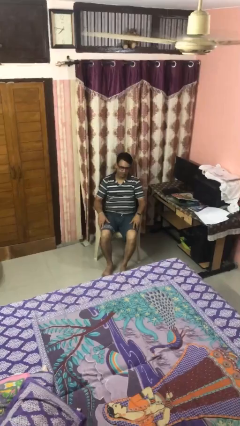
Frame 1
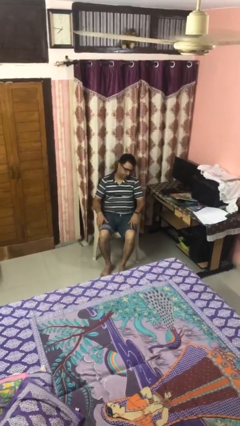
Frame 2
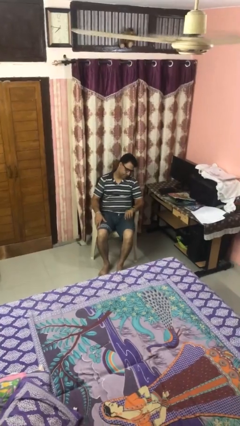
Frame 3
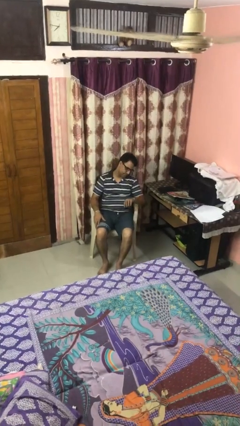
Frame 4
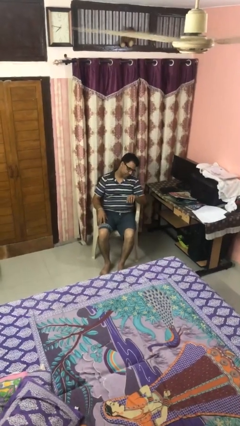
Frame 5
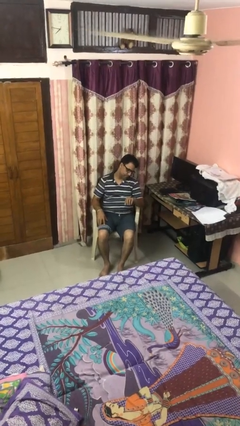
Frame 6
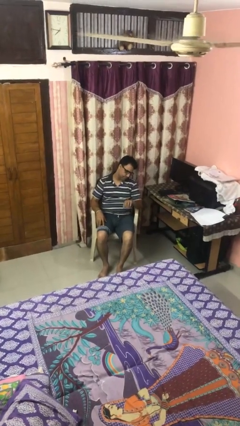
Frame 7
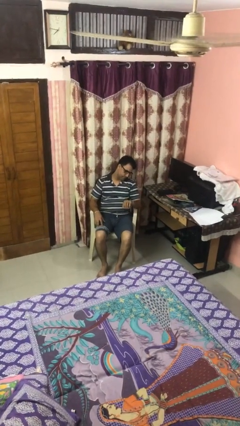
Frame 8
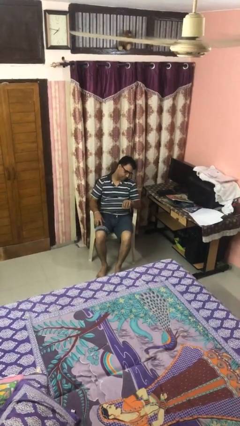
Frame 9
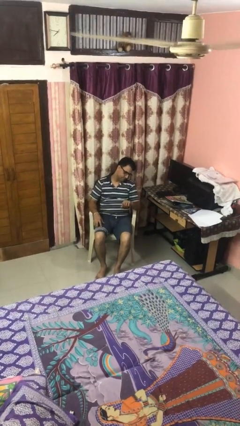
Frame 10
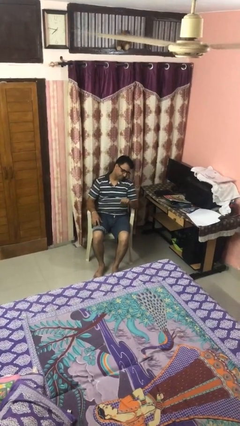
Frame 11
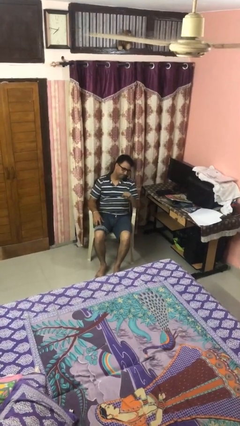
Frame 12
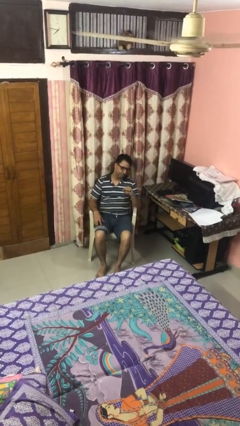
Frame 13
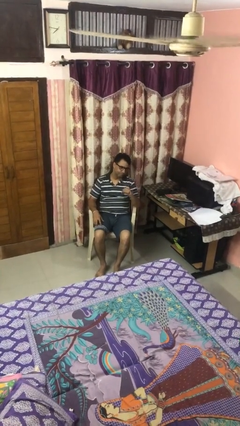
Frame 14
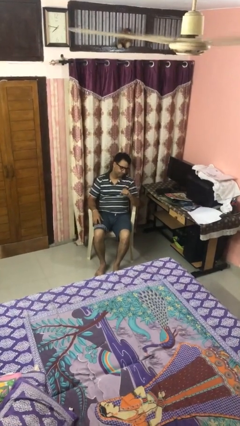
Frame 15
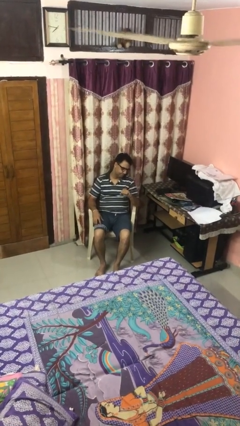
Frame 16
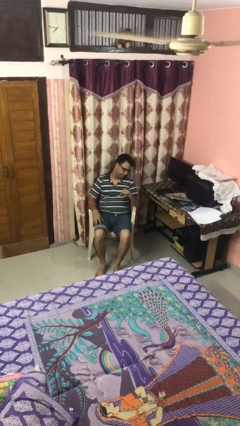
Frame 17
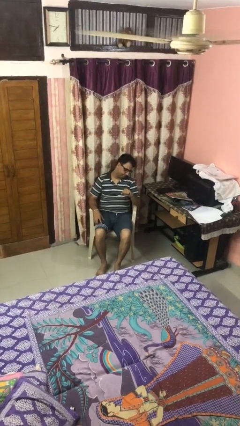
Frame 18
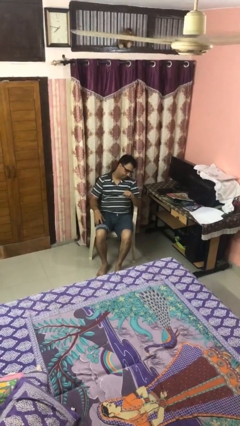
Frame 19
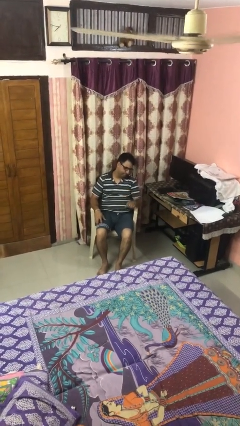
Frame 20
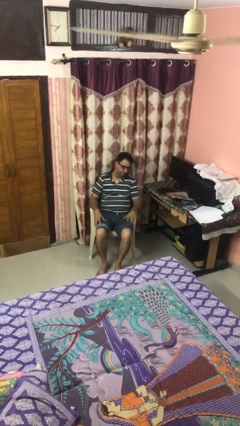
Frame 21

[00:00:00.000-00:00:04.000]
person looks at wristwatch

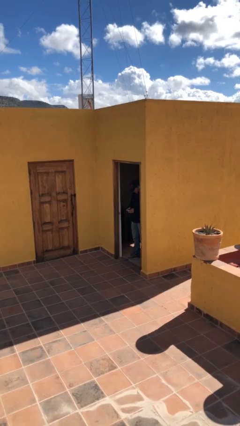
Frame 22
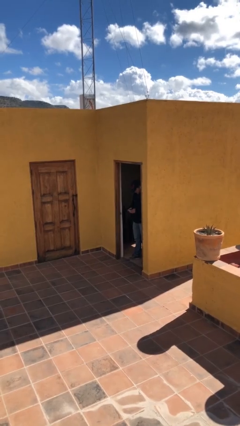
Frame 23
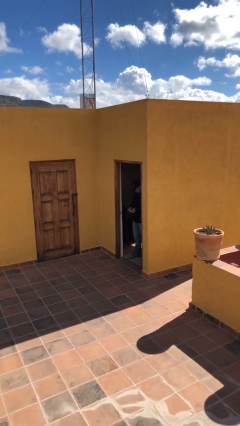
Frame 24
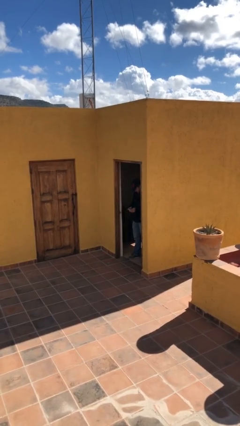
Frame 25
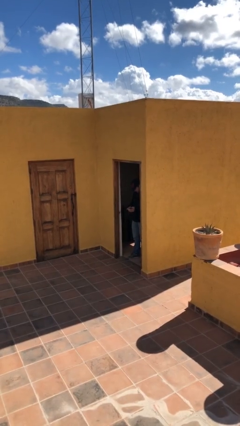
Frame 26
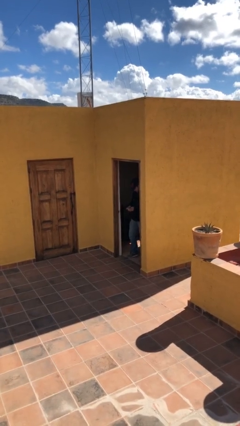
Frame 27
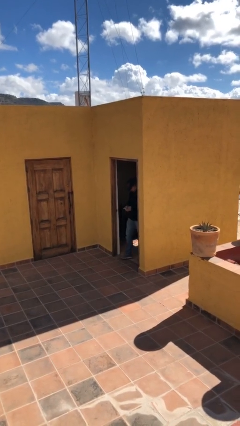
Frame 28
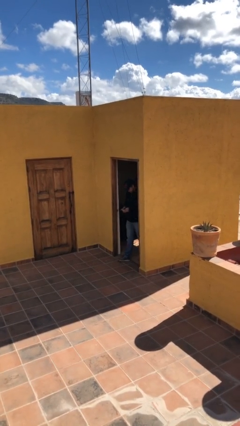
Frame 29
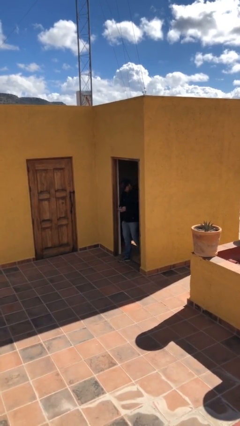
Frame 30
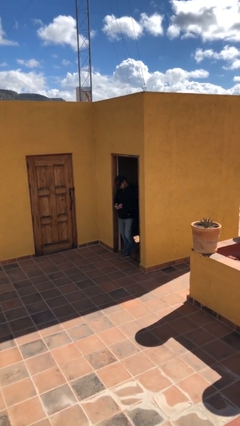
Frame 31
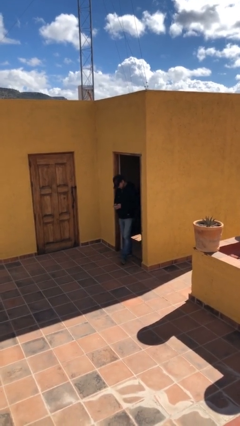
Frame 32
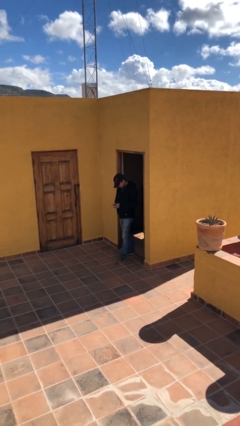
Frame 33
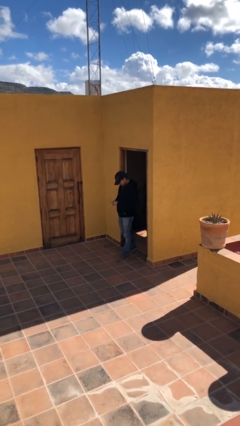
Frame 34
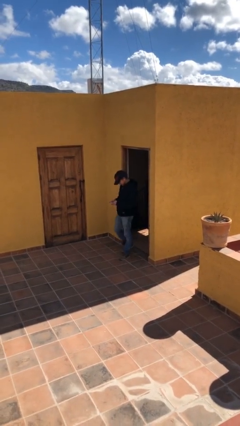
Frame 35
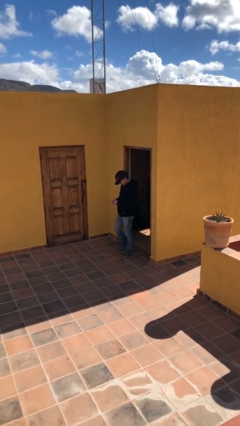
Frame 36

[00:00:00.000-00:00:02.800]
person enters scene through structure

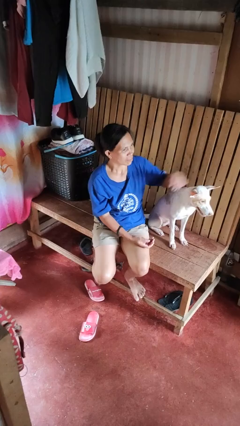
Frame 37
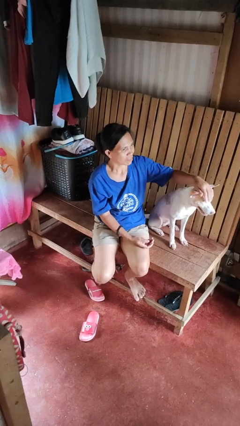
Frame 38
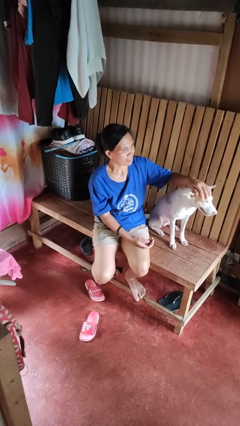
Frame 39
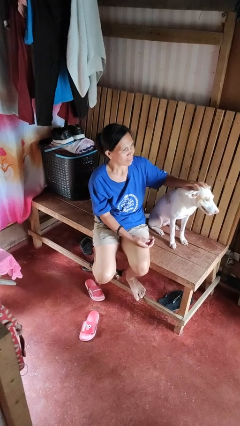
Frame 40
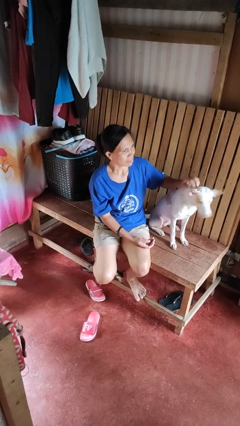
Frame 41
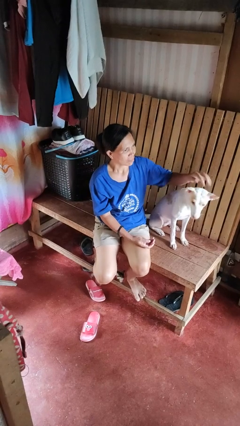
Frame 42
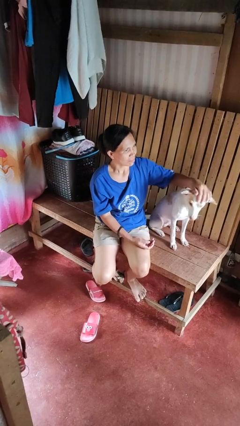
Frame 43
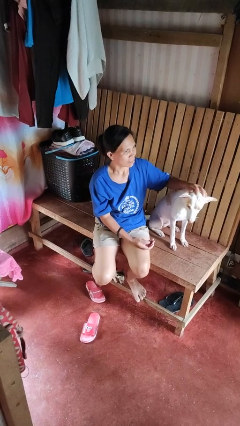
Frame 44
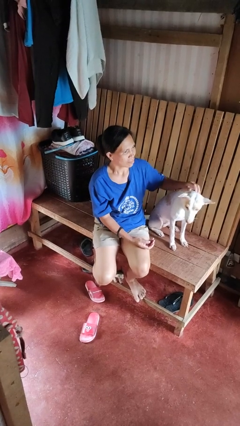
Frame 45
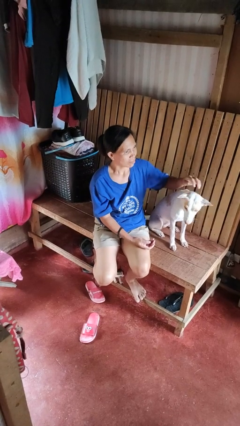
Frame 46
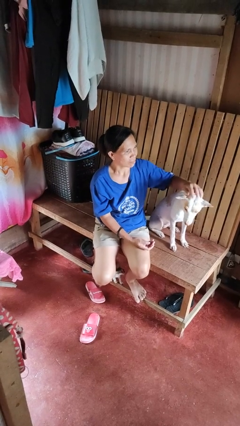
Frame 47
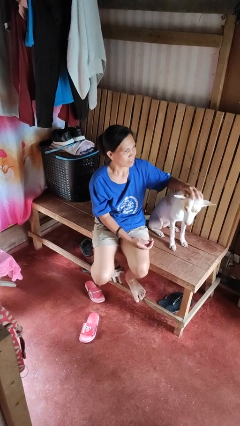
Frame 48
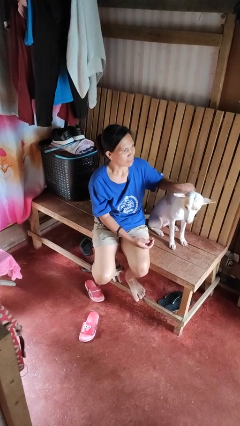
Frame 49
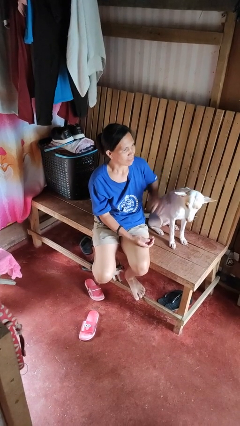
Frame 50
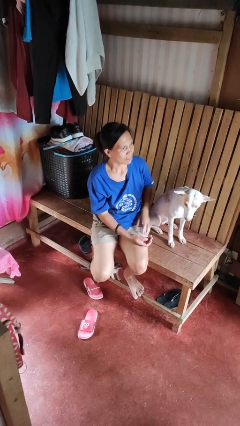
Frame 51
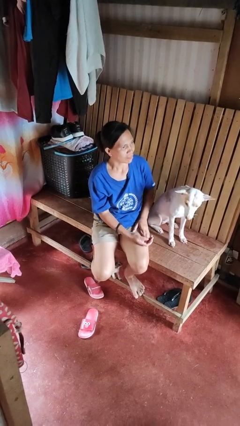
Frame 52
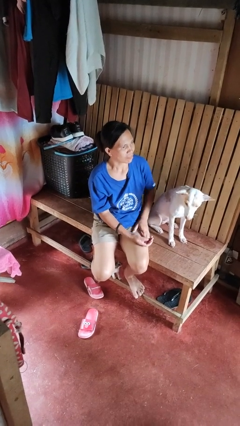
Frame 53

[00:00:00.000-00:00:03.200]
person pets dog

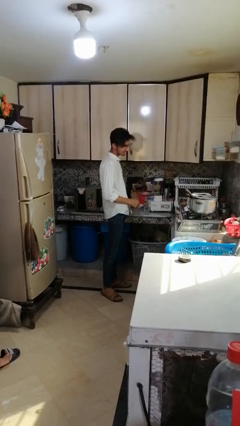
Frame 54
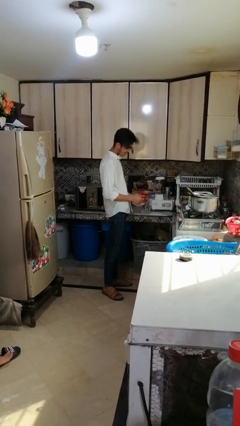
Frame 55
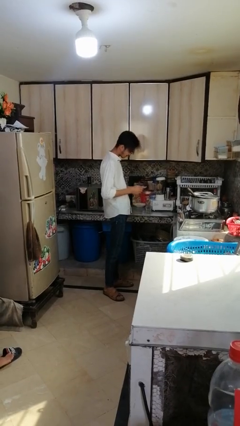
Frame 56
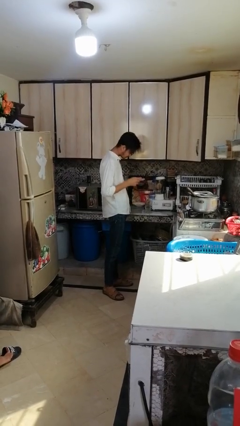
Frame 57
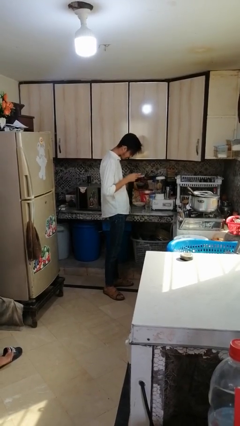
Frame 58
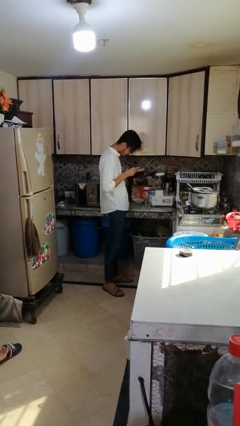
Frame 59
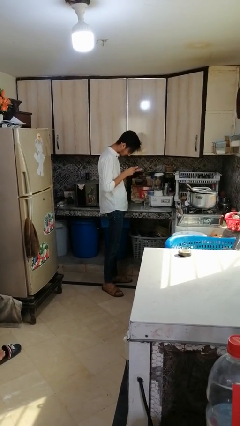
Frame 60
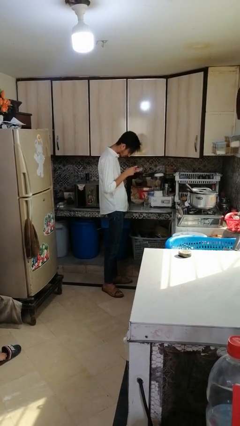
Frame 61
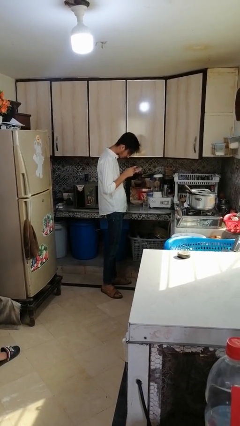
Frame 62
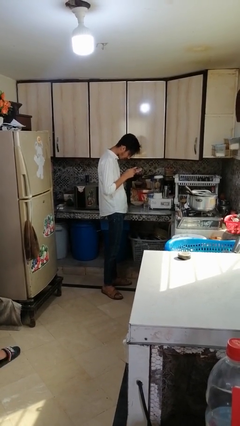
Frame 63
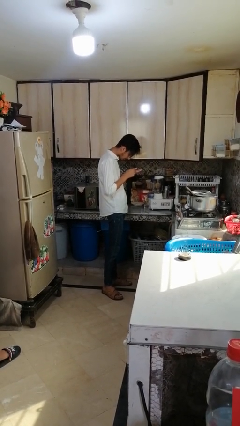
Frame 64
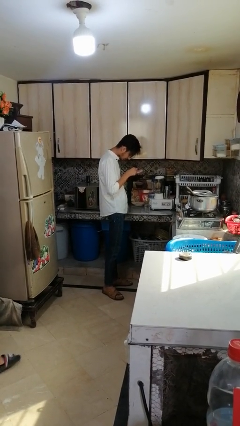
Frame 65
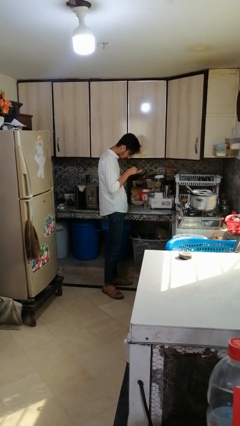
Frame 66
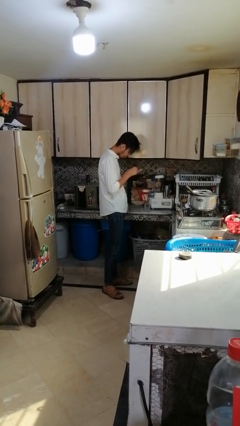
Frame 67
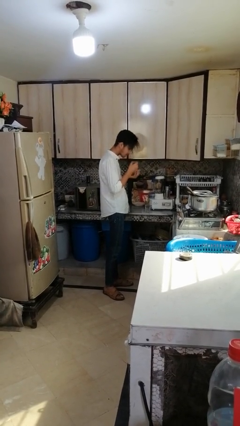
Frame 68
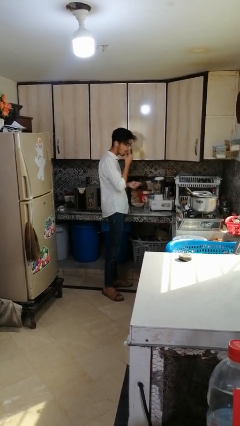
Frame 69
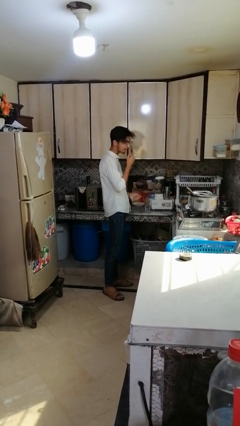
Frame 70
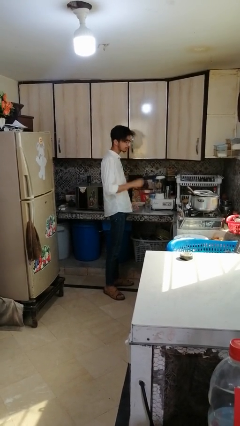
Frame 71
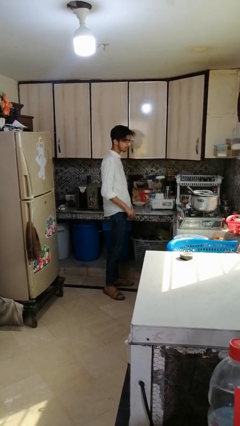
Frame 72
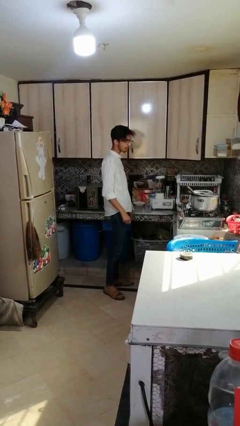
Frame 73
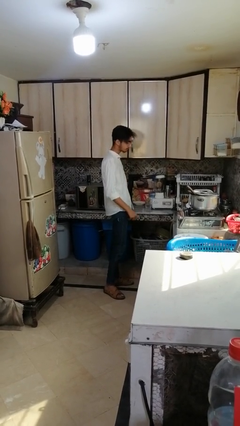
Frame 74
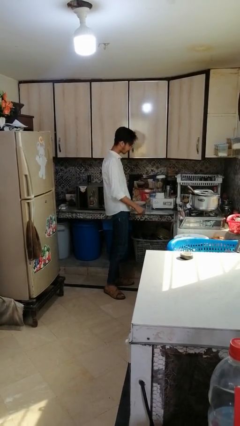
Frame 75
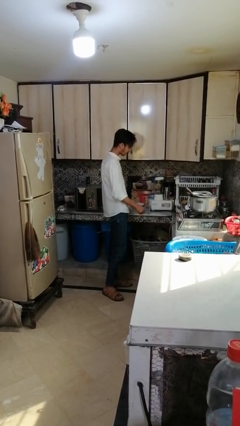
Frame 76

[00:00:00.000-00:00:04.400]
person takes medicine pills

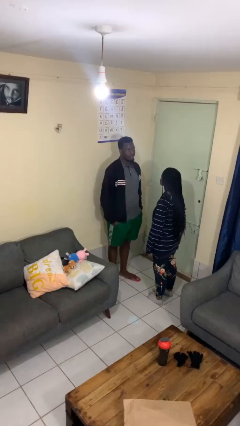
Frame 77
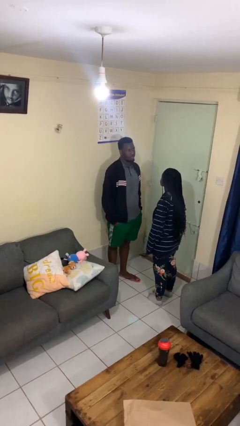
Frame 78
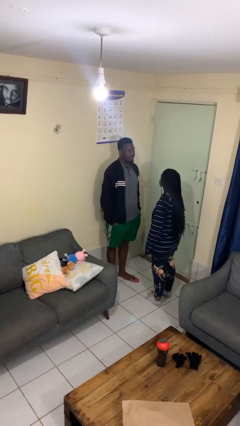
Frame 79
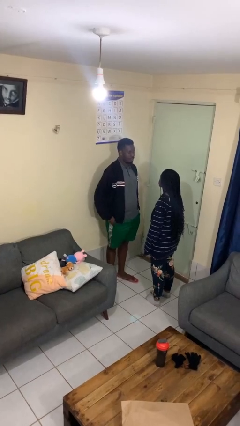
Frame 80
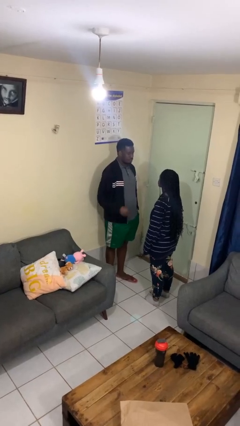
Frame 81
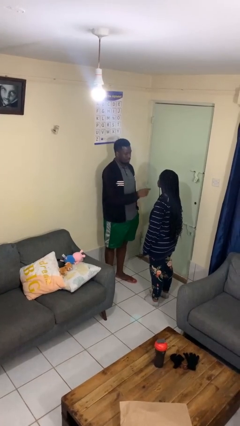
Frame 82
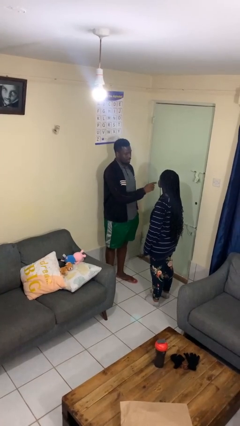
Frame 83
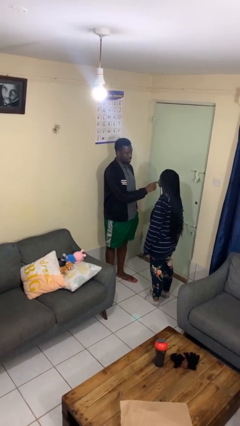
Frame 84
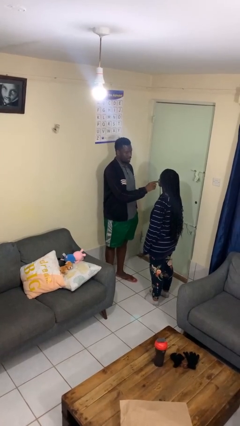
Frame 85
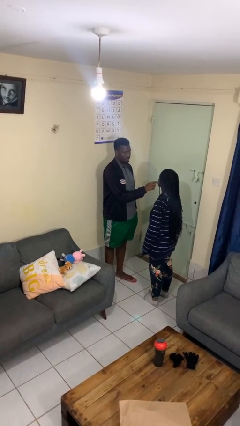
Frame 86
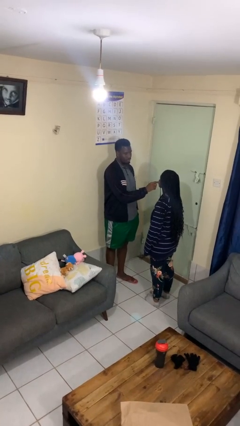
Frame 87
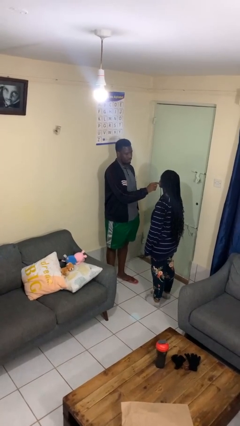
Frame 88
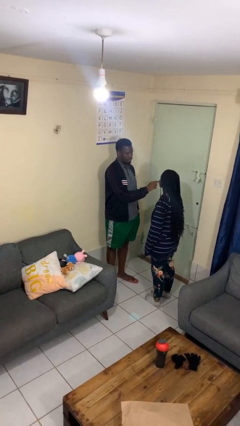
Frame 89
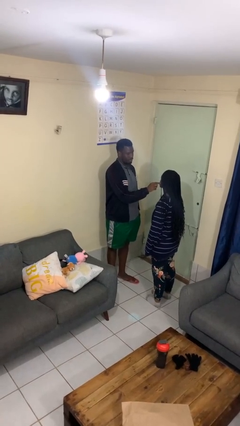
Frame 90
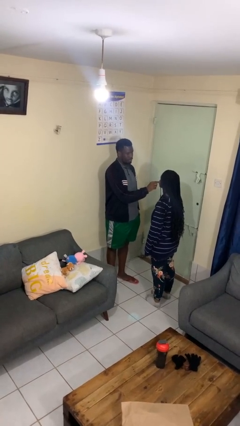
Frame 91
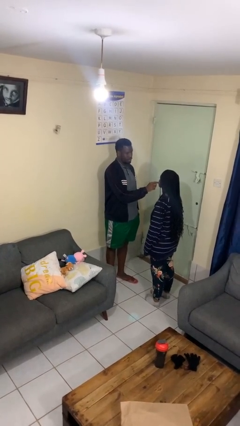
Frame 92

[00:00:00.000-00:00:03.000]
person touches face of person
